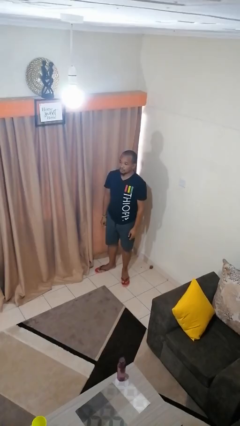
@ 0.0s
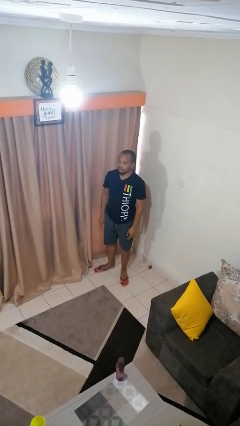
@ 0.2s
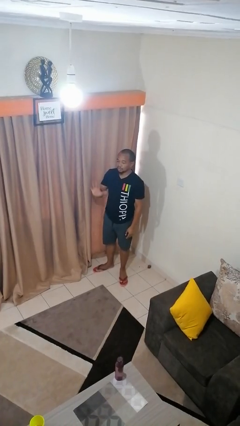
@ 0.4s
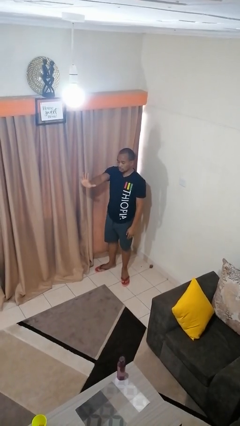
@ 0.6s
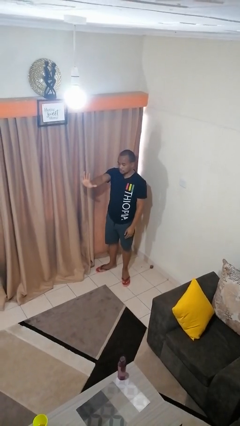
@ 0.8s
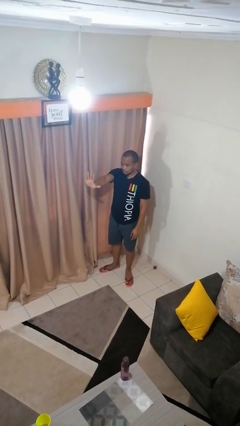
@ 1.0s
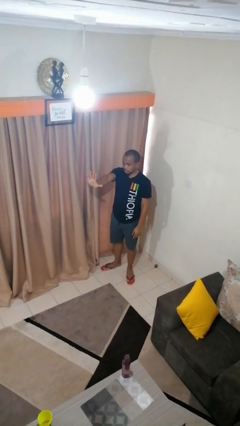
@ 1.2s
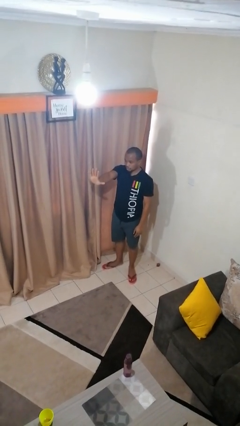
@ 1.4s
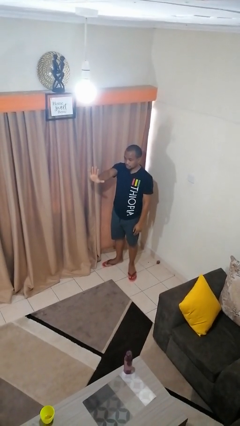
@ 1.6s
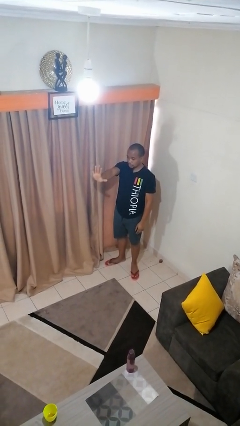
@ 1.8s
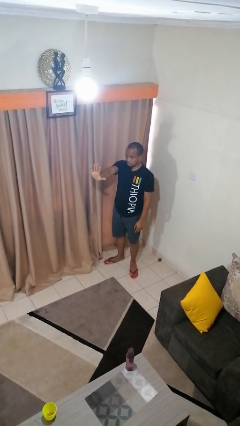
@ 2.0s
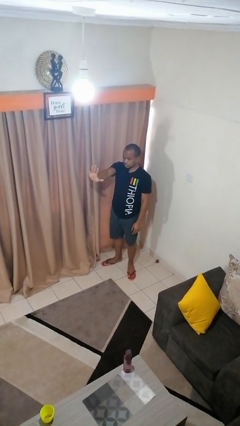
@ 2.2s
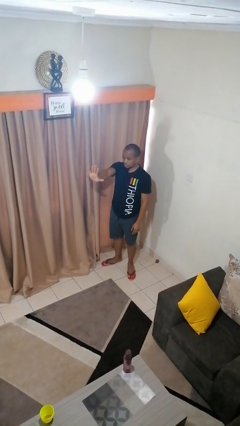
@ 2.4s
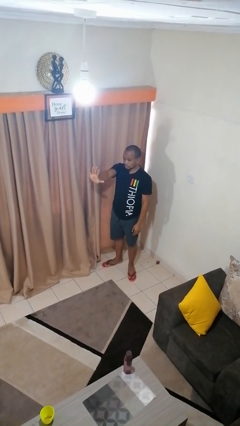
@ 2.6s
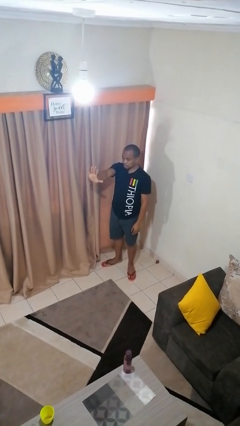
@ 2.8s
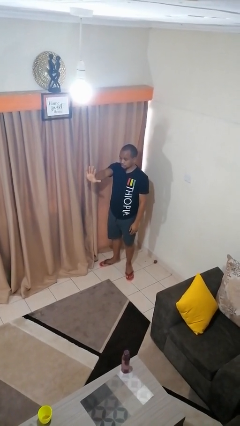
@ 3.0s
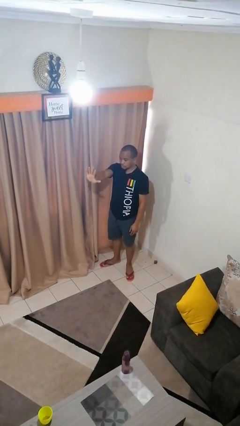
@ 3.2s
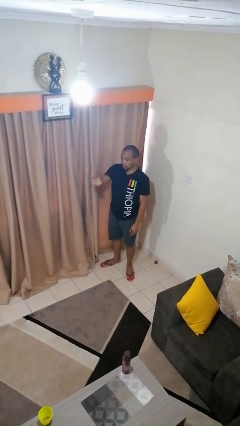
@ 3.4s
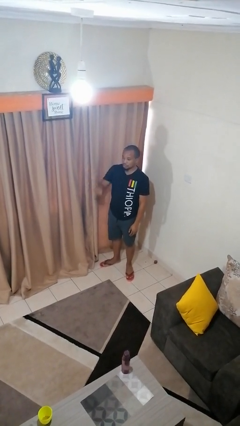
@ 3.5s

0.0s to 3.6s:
person gestures number five

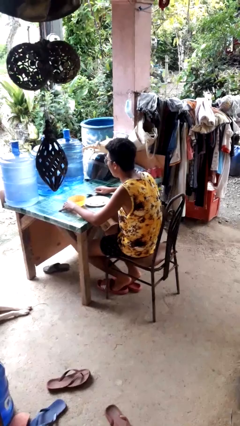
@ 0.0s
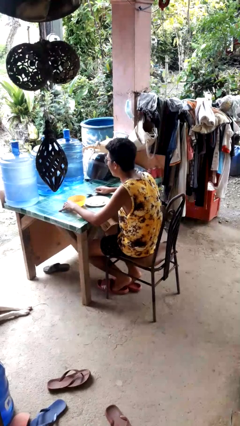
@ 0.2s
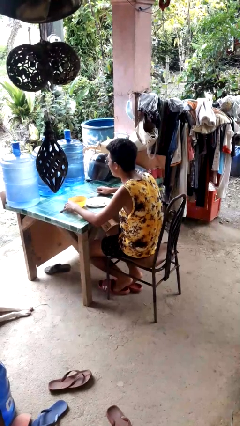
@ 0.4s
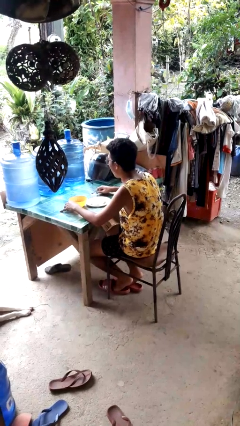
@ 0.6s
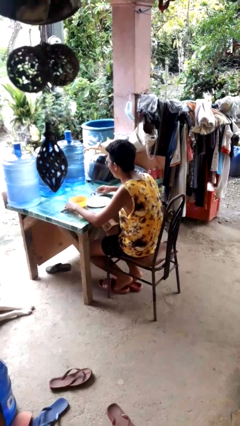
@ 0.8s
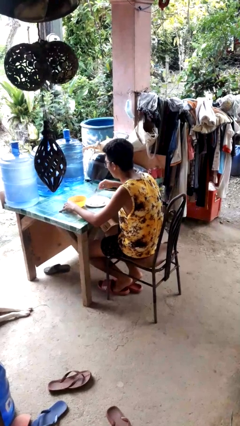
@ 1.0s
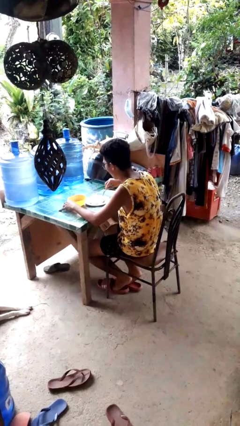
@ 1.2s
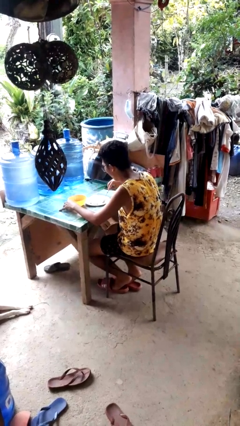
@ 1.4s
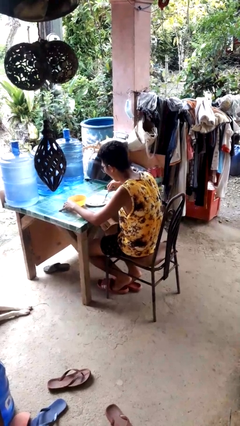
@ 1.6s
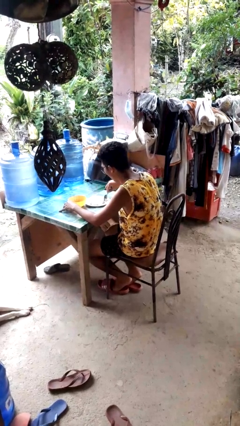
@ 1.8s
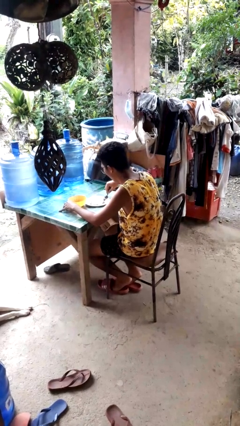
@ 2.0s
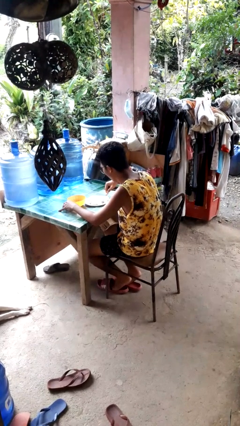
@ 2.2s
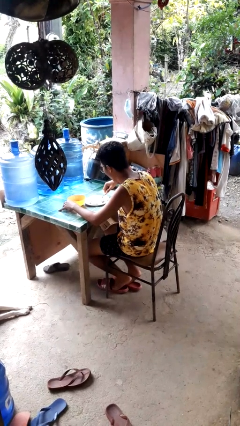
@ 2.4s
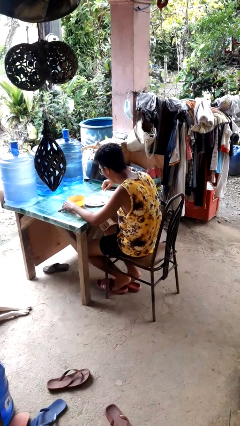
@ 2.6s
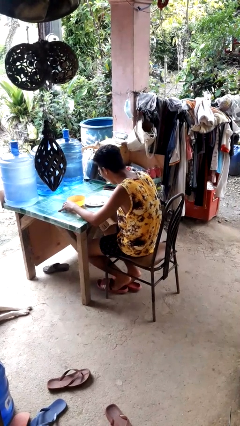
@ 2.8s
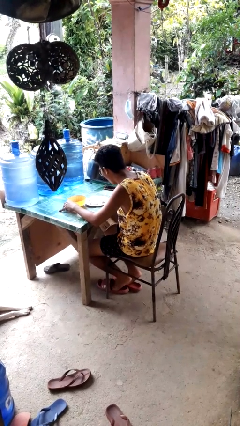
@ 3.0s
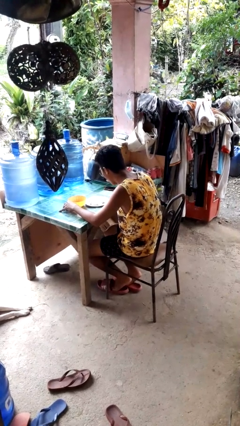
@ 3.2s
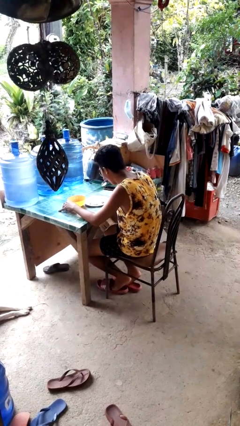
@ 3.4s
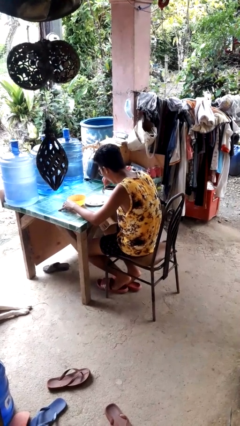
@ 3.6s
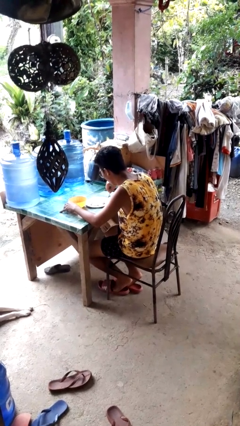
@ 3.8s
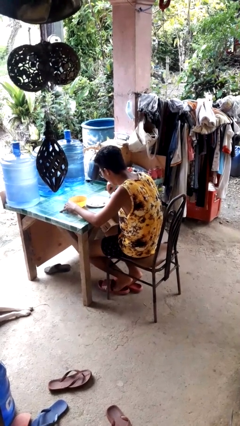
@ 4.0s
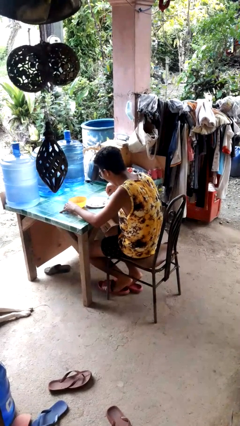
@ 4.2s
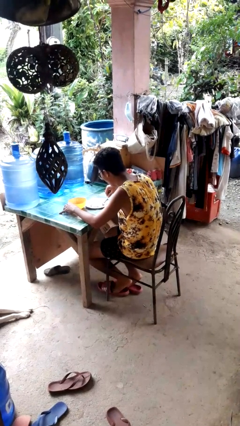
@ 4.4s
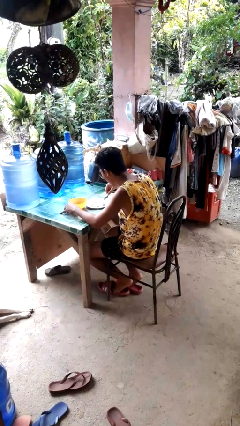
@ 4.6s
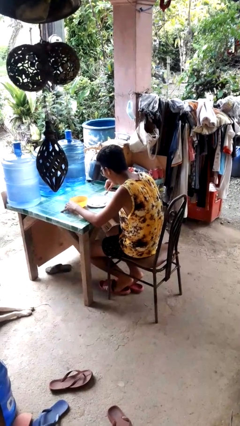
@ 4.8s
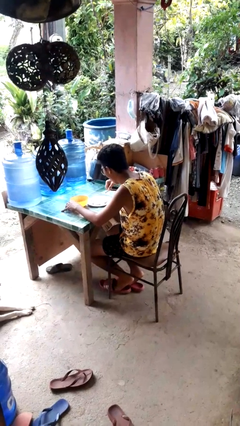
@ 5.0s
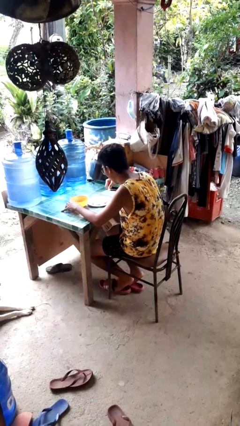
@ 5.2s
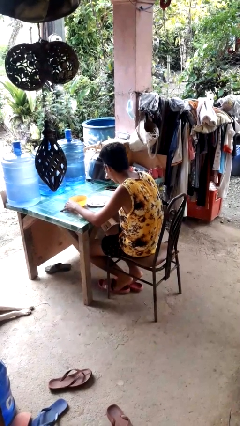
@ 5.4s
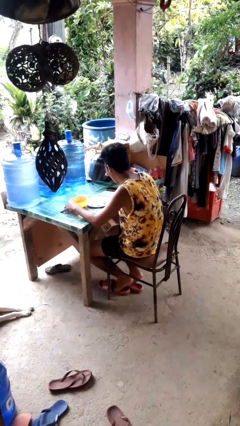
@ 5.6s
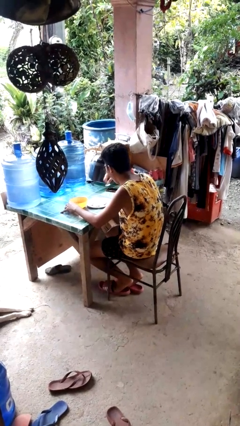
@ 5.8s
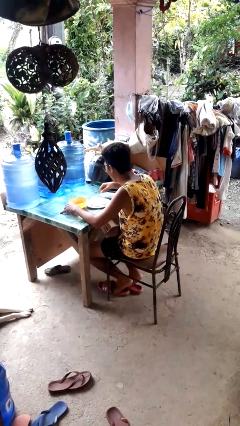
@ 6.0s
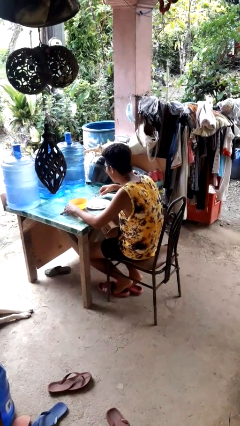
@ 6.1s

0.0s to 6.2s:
person eats with utensil

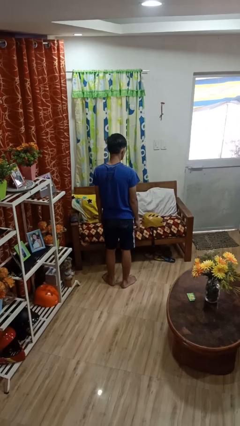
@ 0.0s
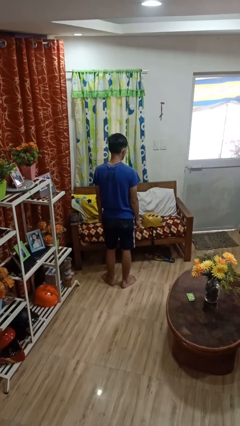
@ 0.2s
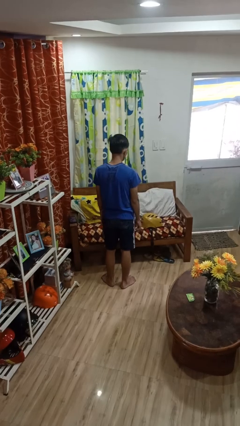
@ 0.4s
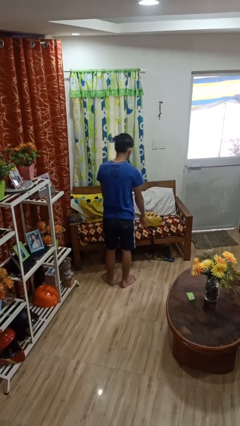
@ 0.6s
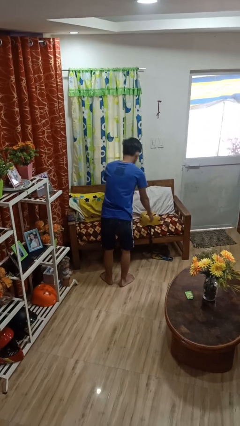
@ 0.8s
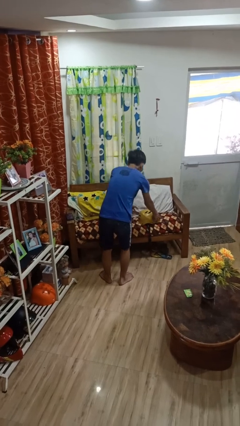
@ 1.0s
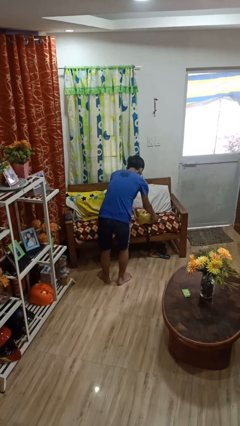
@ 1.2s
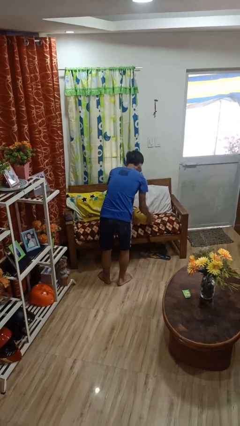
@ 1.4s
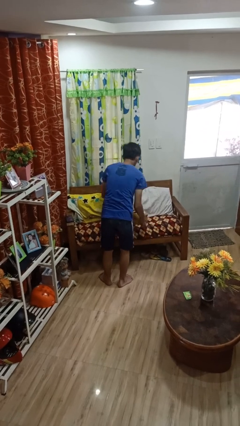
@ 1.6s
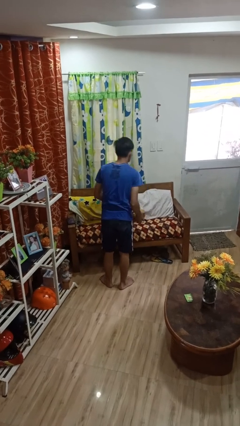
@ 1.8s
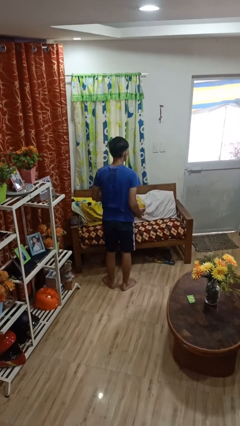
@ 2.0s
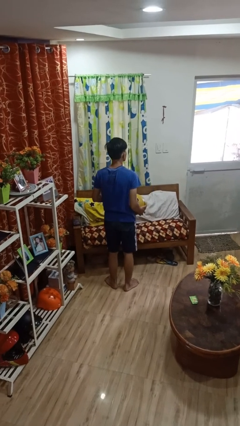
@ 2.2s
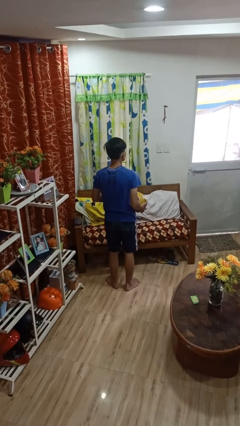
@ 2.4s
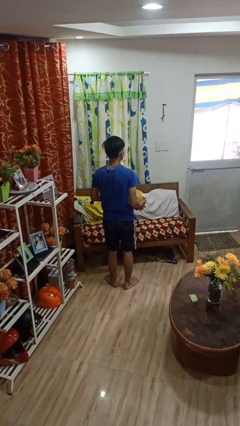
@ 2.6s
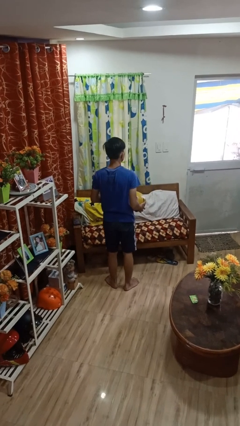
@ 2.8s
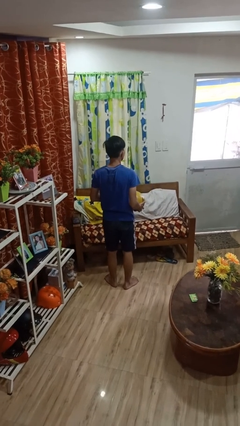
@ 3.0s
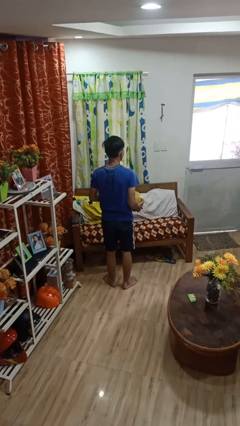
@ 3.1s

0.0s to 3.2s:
person picks up object from couch

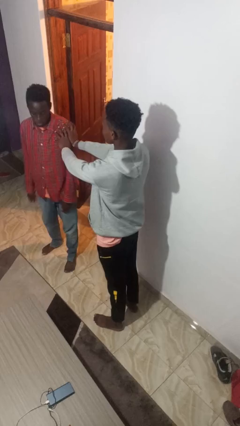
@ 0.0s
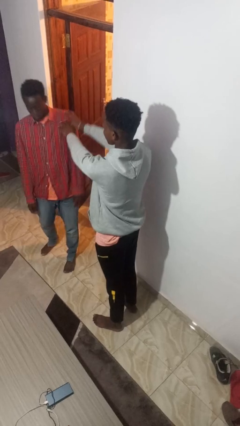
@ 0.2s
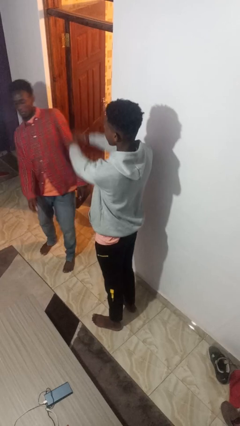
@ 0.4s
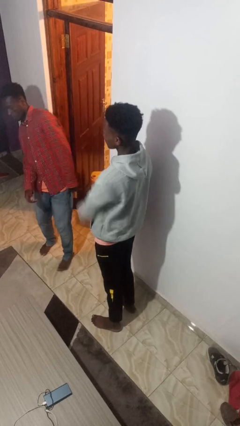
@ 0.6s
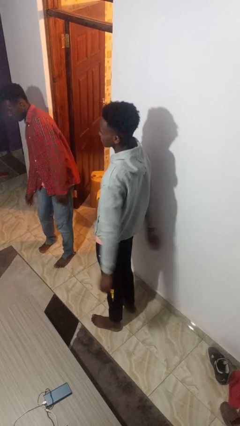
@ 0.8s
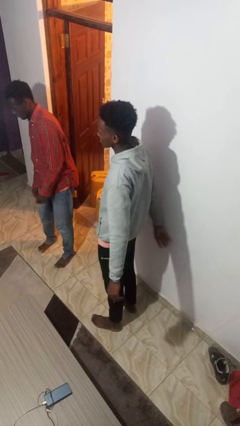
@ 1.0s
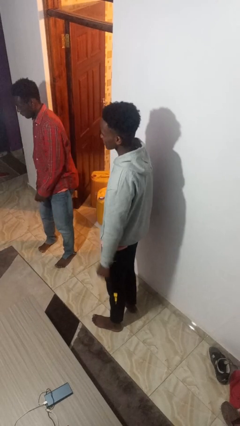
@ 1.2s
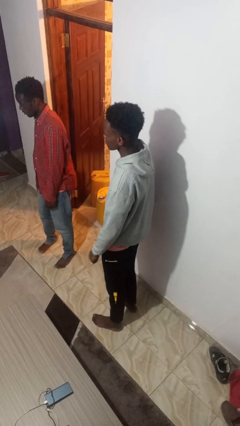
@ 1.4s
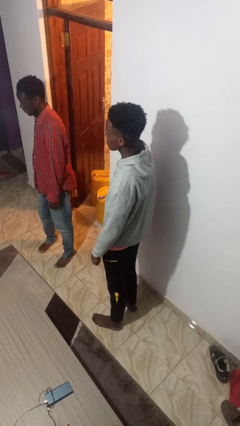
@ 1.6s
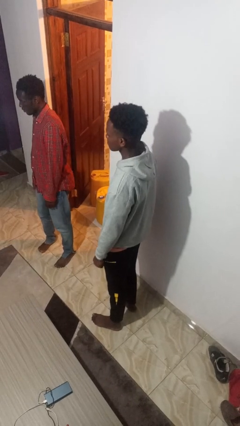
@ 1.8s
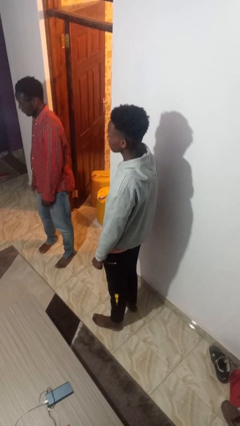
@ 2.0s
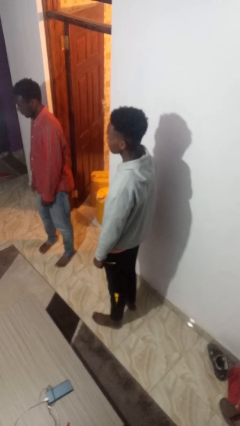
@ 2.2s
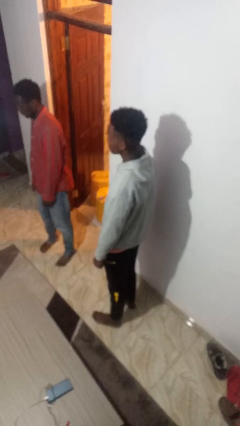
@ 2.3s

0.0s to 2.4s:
person shoves person

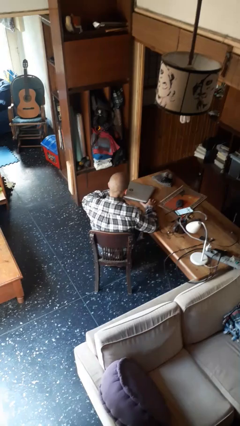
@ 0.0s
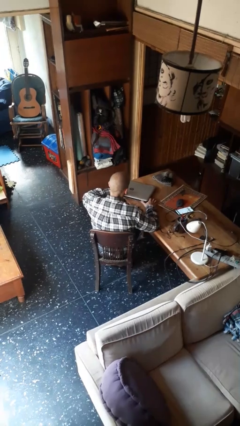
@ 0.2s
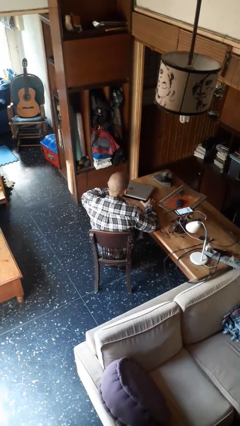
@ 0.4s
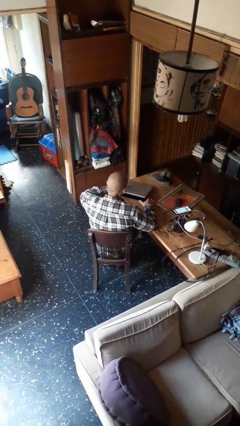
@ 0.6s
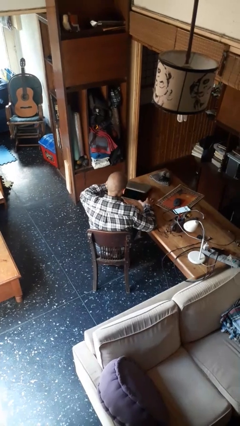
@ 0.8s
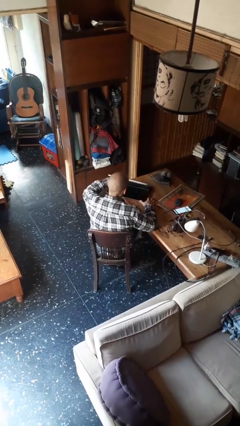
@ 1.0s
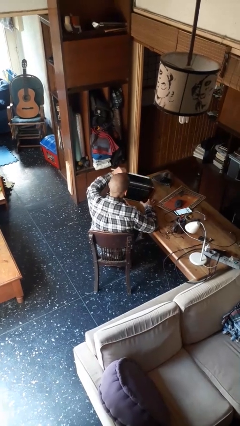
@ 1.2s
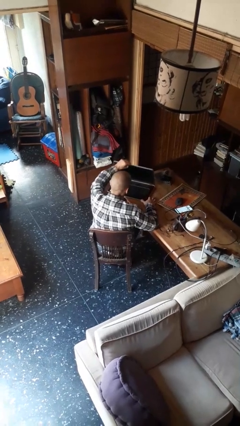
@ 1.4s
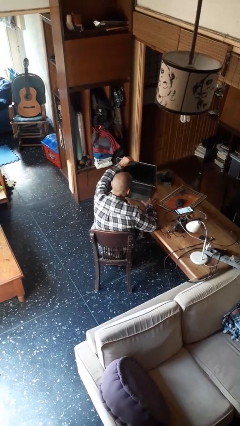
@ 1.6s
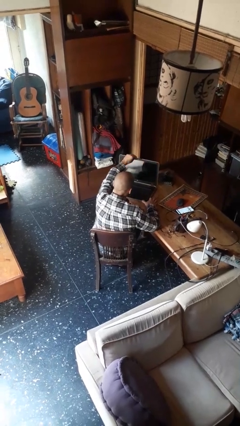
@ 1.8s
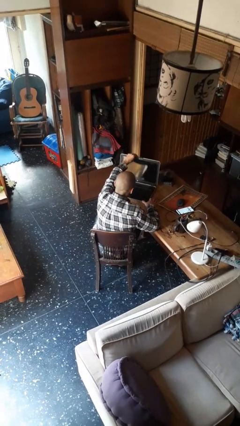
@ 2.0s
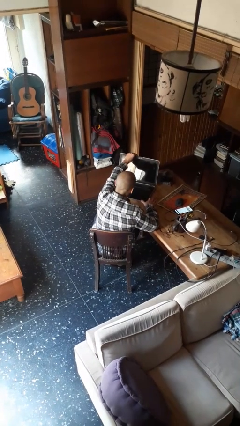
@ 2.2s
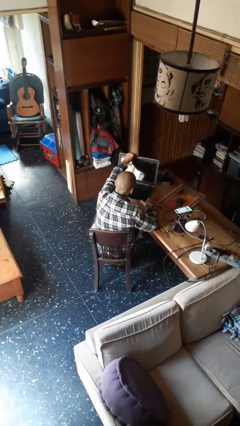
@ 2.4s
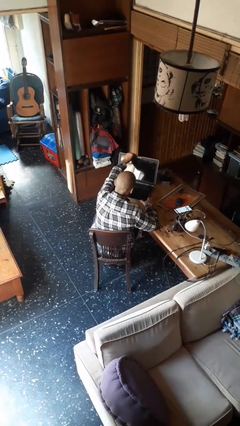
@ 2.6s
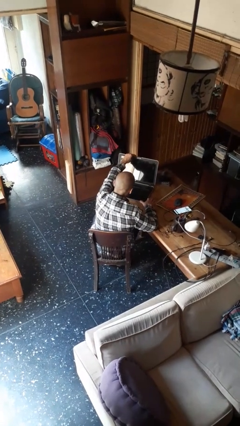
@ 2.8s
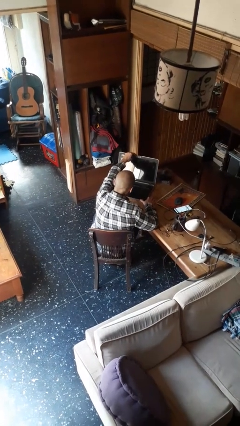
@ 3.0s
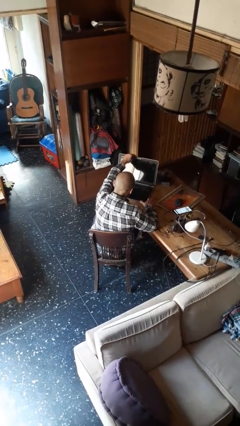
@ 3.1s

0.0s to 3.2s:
person opens laptop
